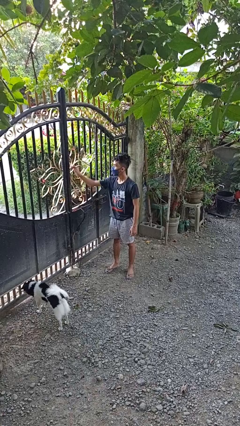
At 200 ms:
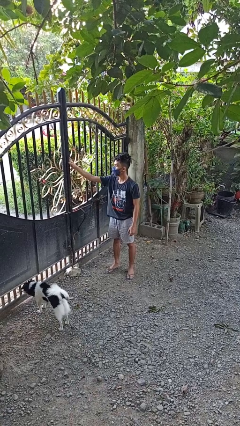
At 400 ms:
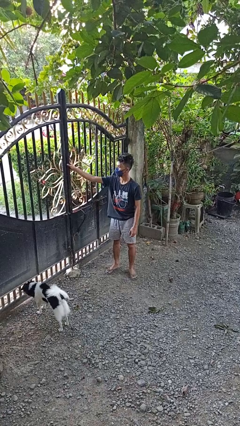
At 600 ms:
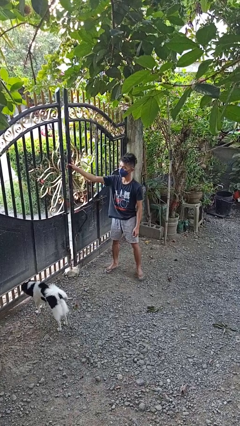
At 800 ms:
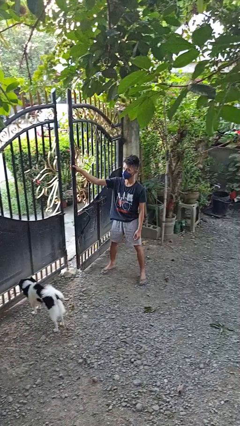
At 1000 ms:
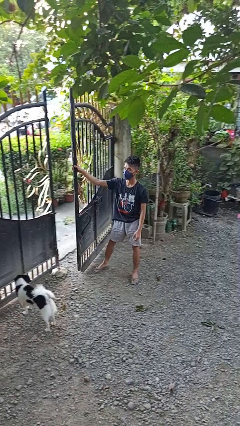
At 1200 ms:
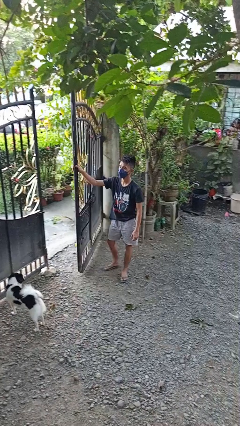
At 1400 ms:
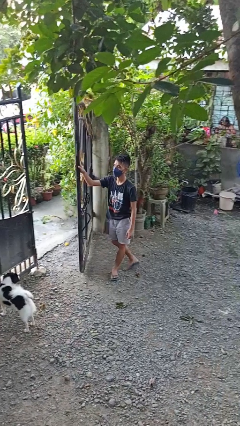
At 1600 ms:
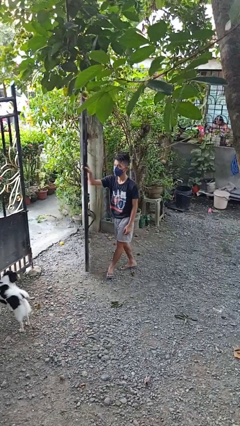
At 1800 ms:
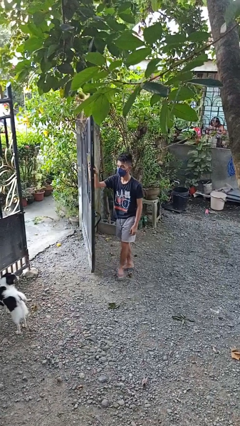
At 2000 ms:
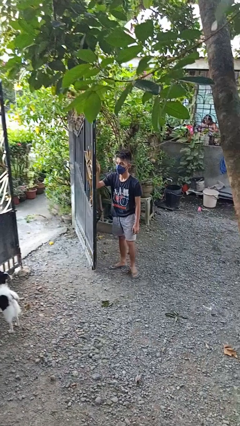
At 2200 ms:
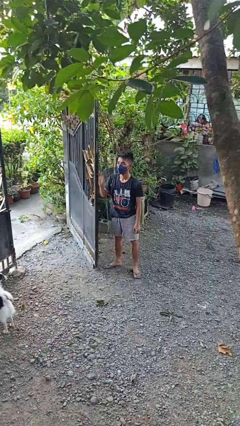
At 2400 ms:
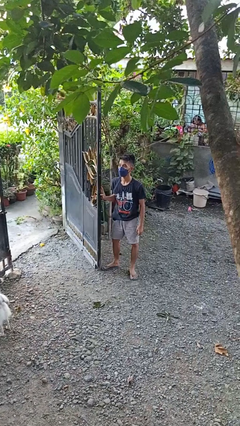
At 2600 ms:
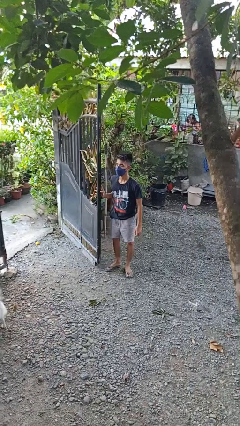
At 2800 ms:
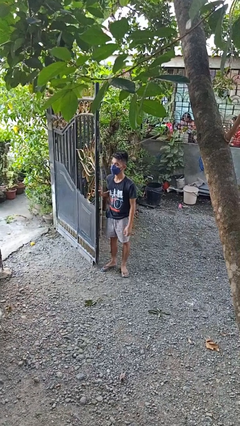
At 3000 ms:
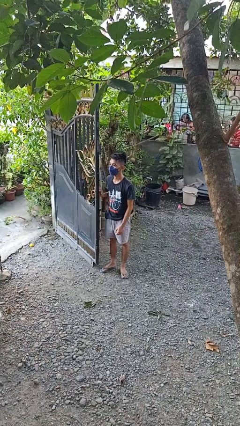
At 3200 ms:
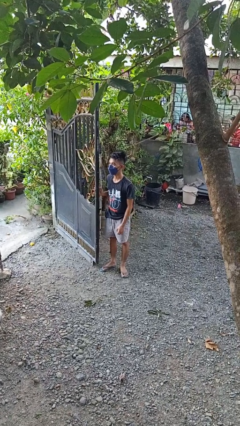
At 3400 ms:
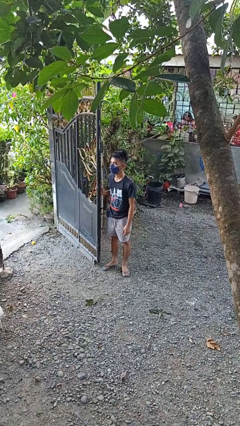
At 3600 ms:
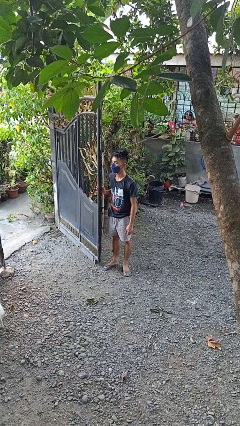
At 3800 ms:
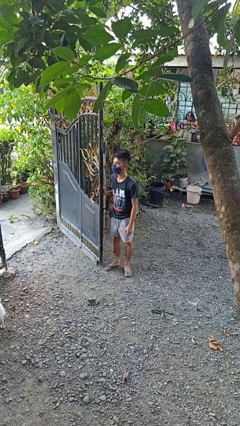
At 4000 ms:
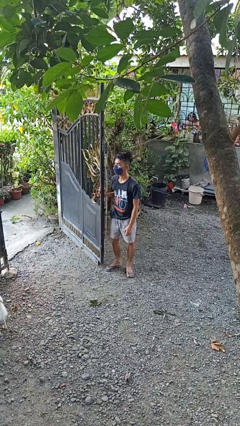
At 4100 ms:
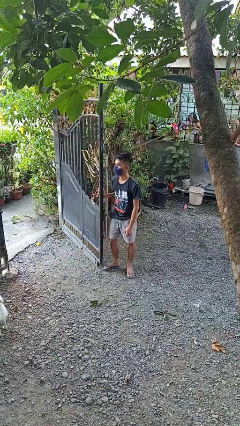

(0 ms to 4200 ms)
person opens gate

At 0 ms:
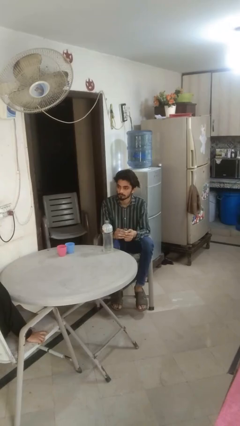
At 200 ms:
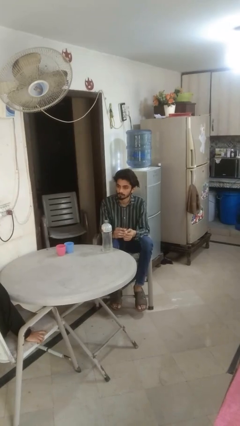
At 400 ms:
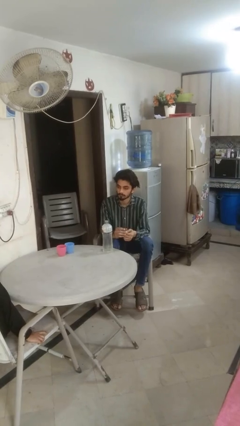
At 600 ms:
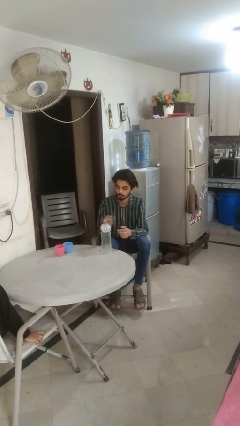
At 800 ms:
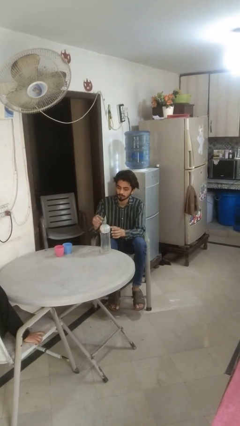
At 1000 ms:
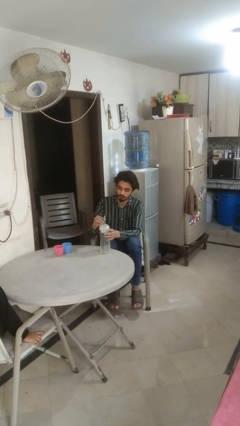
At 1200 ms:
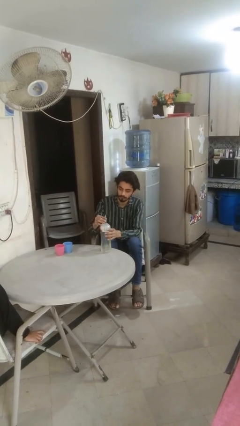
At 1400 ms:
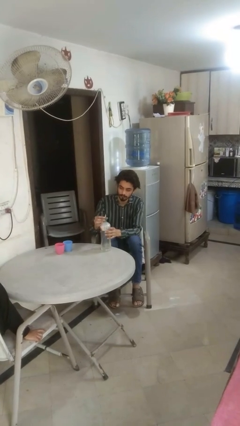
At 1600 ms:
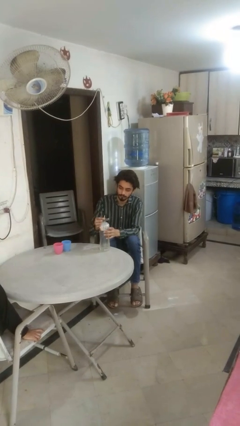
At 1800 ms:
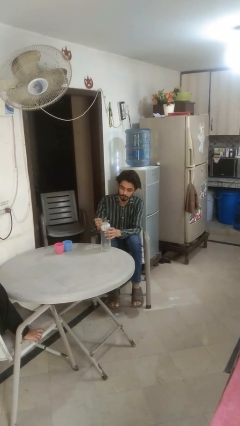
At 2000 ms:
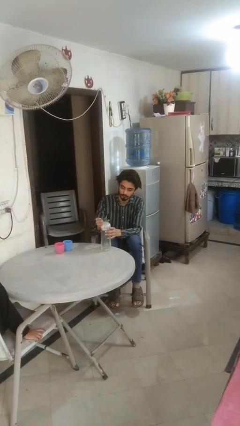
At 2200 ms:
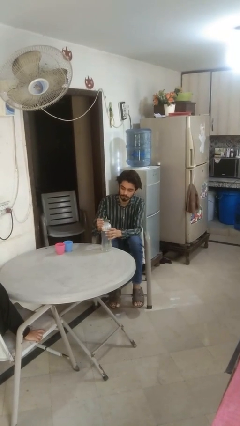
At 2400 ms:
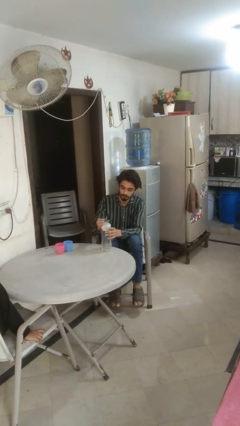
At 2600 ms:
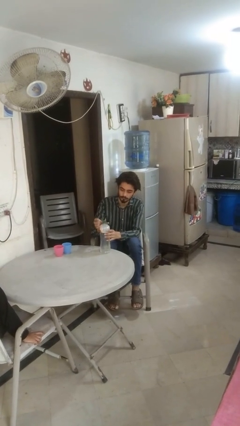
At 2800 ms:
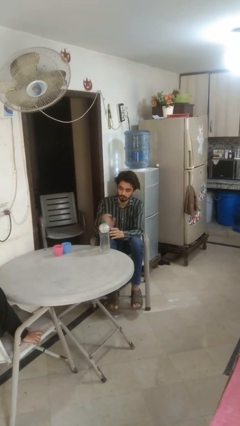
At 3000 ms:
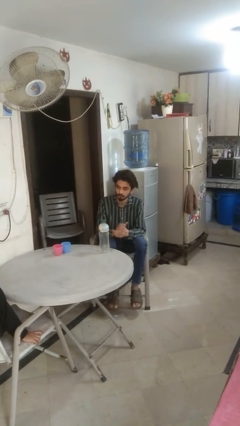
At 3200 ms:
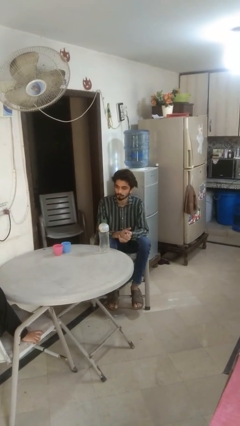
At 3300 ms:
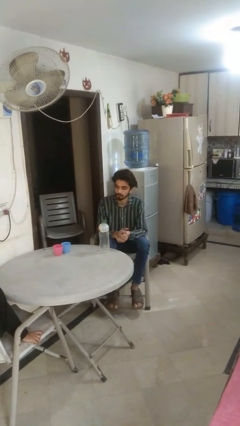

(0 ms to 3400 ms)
person screws lid to bottle

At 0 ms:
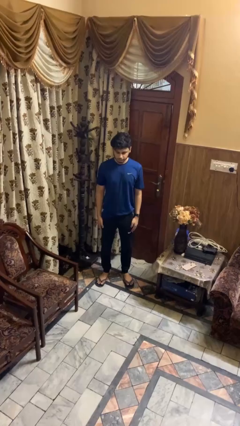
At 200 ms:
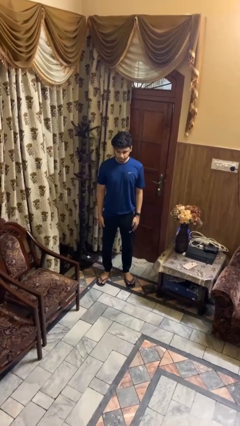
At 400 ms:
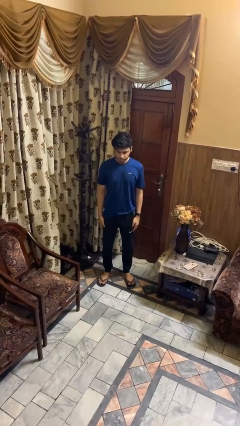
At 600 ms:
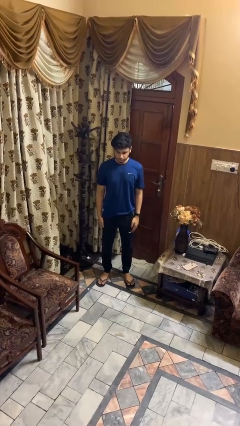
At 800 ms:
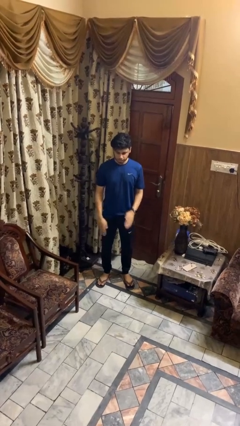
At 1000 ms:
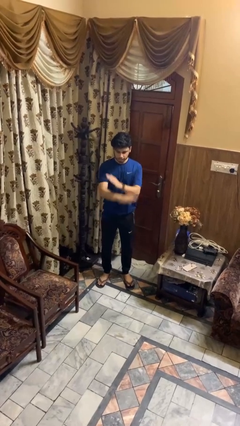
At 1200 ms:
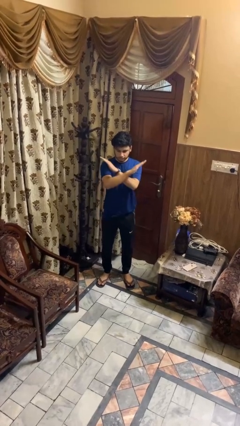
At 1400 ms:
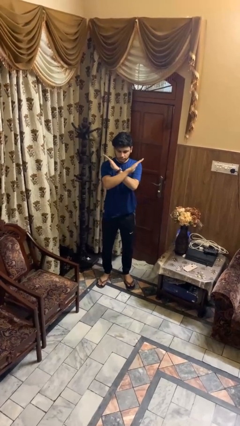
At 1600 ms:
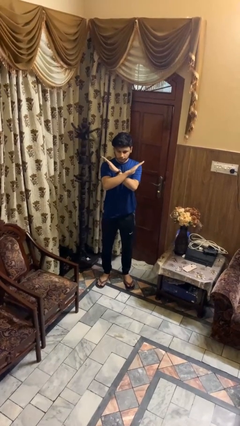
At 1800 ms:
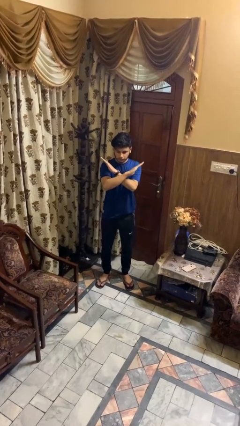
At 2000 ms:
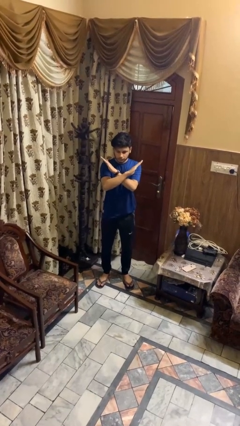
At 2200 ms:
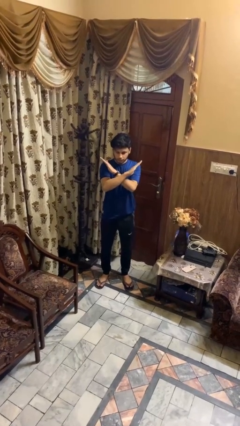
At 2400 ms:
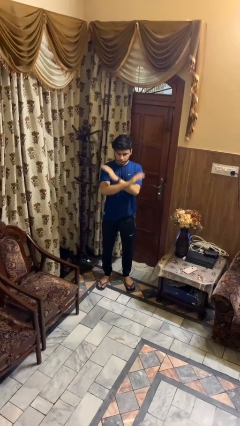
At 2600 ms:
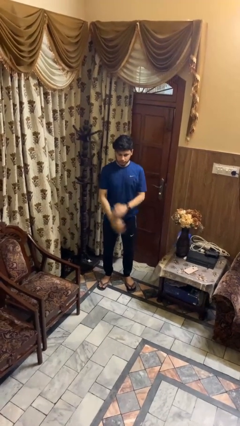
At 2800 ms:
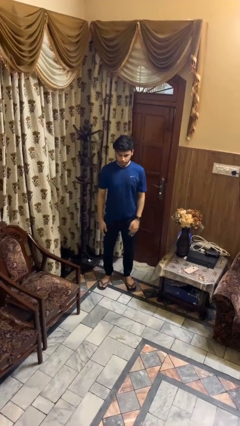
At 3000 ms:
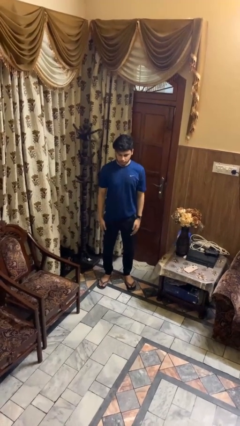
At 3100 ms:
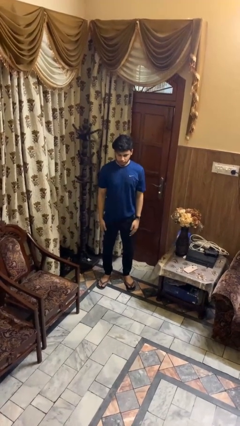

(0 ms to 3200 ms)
person gestures arms x

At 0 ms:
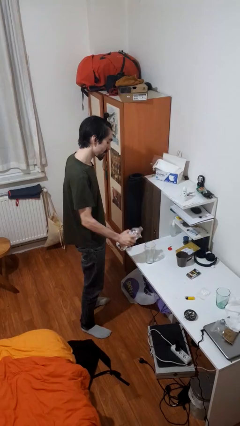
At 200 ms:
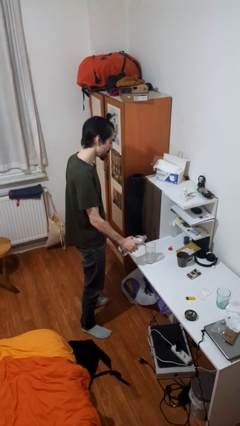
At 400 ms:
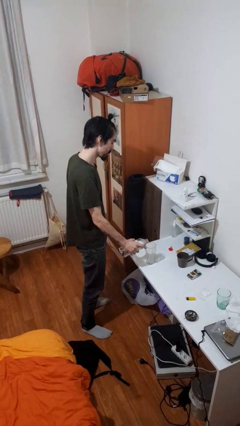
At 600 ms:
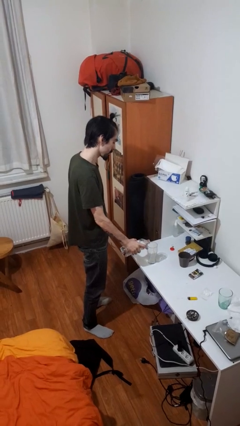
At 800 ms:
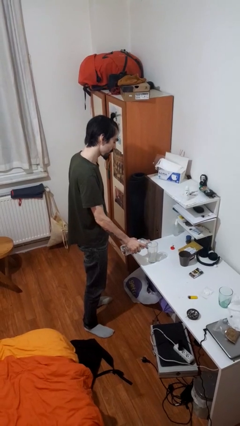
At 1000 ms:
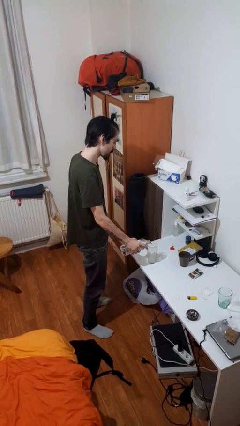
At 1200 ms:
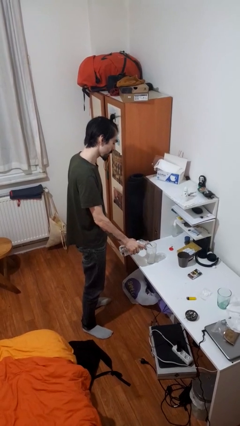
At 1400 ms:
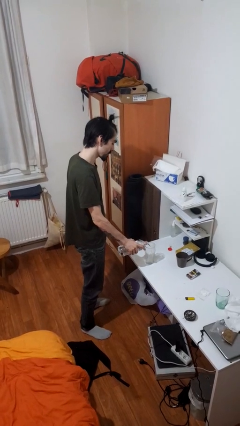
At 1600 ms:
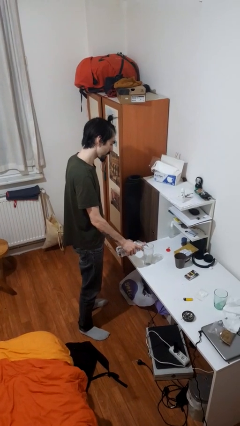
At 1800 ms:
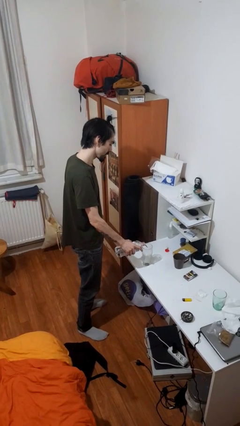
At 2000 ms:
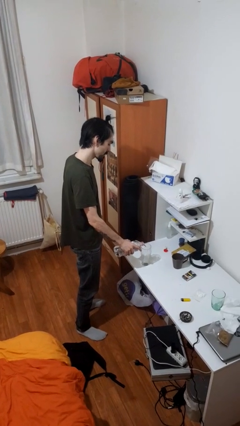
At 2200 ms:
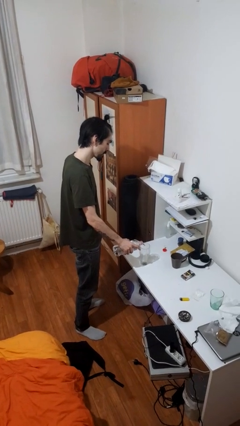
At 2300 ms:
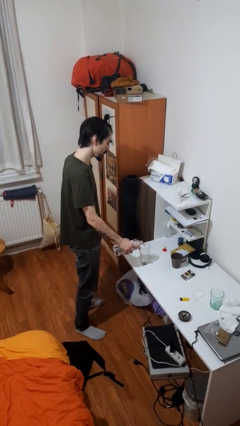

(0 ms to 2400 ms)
person pours liquid into cup

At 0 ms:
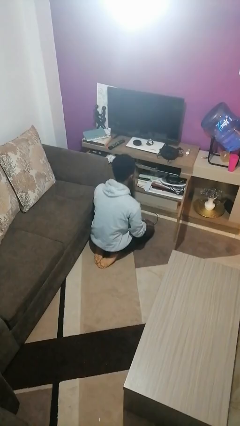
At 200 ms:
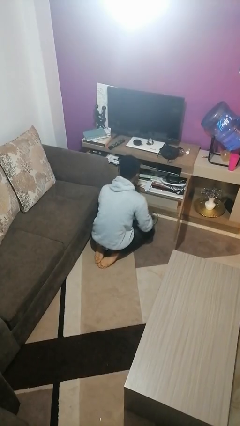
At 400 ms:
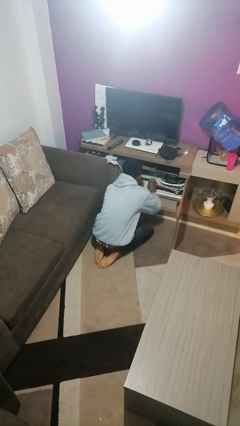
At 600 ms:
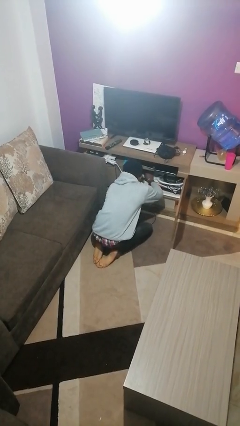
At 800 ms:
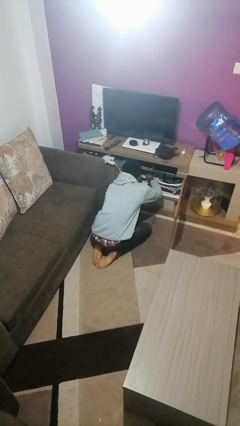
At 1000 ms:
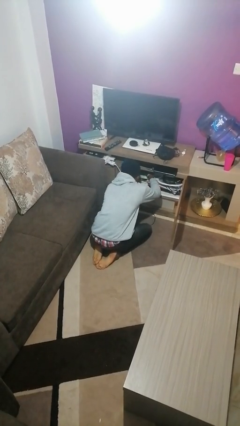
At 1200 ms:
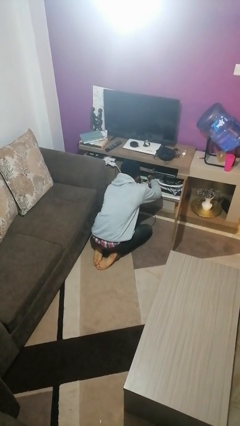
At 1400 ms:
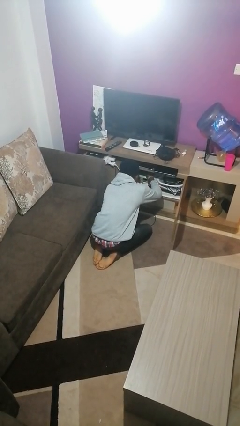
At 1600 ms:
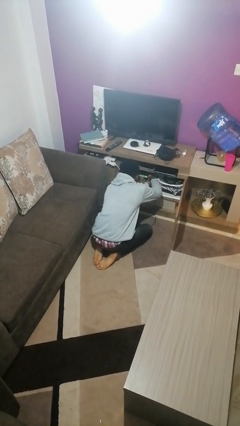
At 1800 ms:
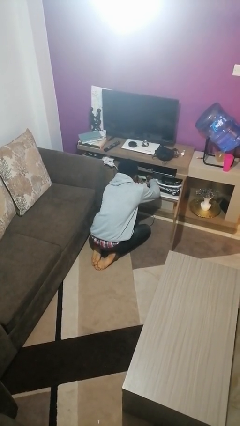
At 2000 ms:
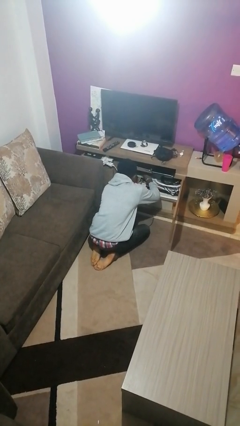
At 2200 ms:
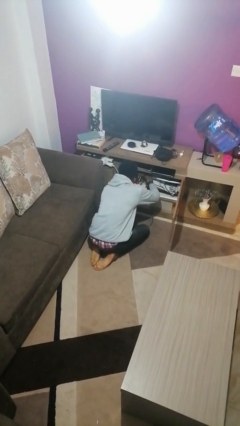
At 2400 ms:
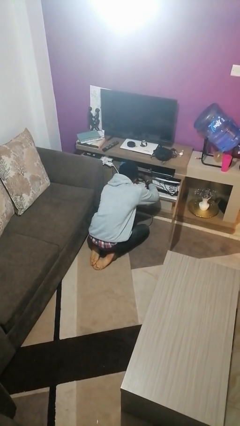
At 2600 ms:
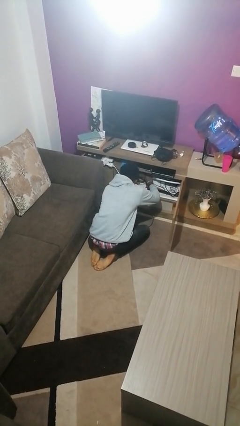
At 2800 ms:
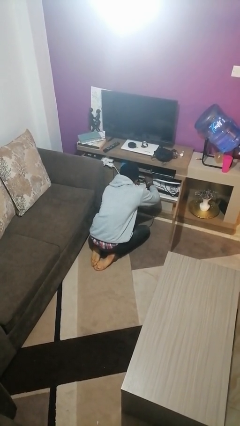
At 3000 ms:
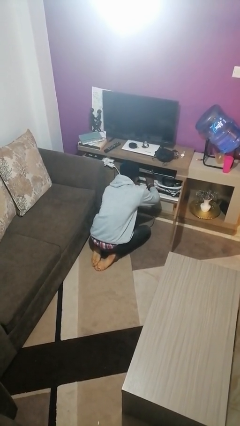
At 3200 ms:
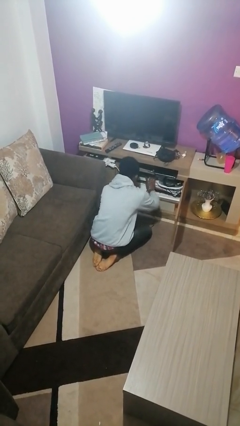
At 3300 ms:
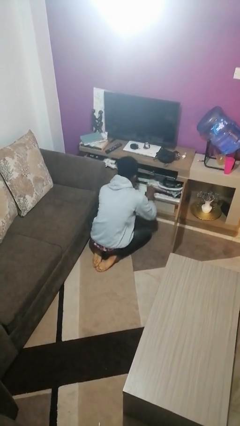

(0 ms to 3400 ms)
person searches in cabinet

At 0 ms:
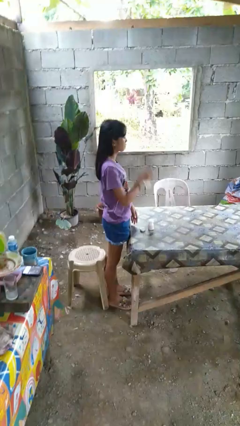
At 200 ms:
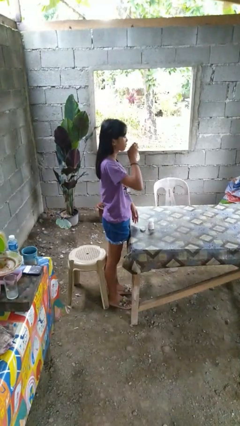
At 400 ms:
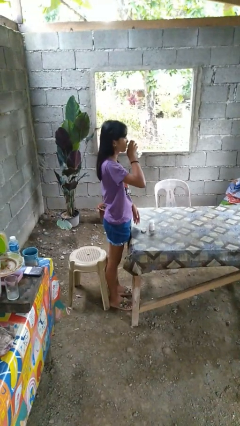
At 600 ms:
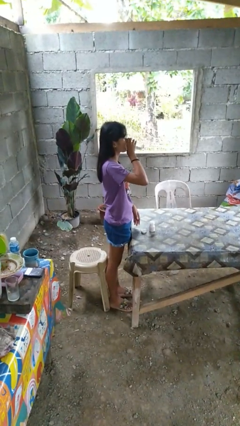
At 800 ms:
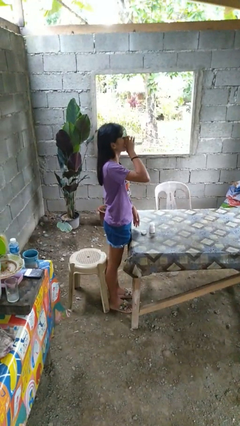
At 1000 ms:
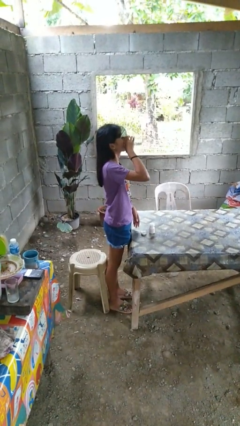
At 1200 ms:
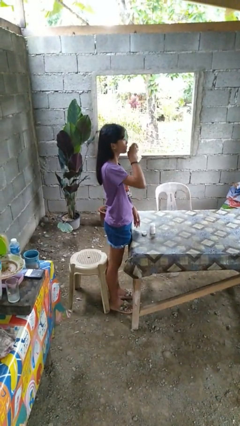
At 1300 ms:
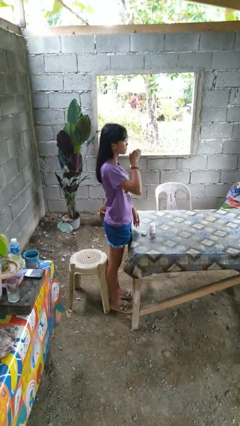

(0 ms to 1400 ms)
person drinks from cup
